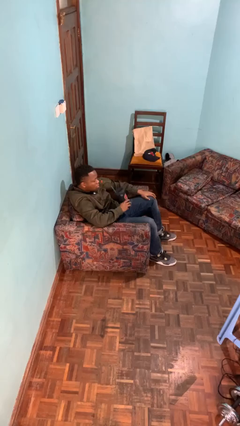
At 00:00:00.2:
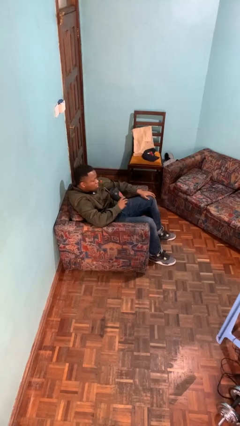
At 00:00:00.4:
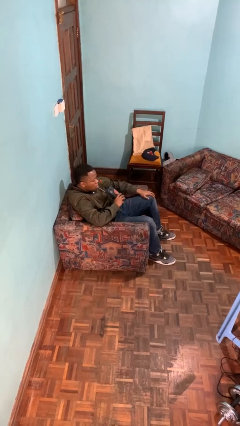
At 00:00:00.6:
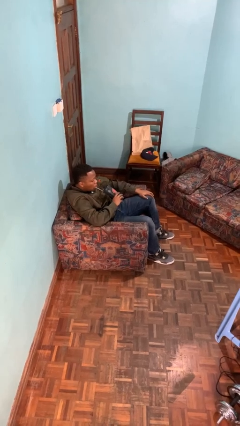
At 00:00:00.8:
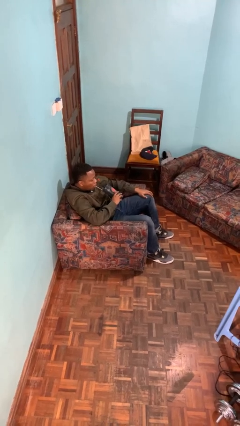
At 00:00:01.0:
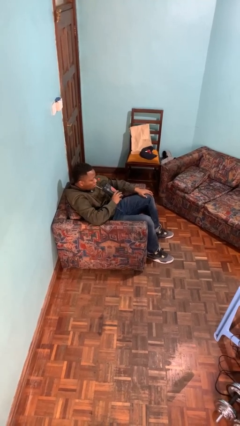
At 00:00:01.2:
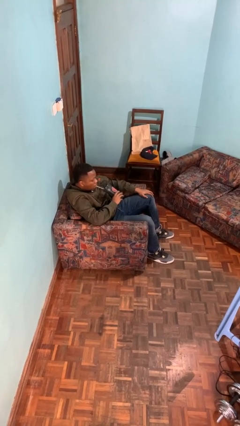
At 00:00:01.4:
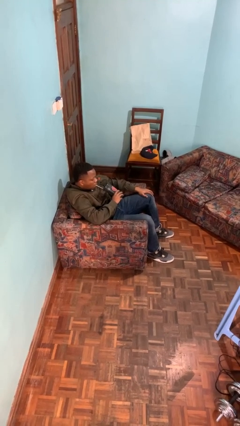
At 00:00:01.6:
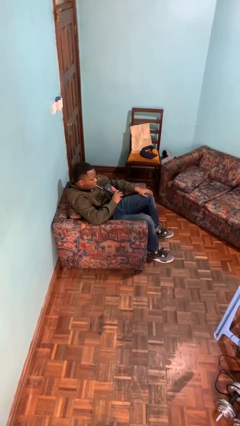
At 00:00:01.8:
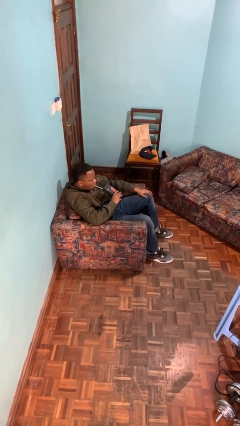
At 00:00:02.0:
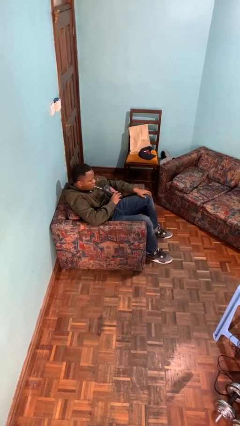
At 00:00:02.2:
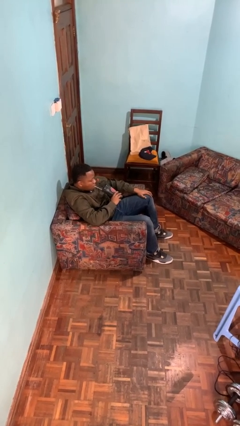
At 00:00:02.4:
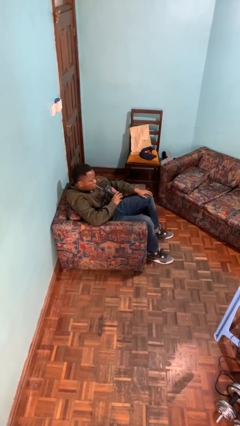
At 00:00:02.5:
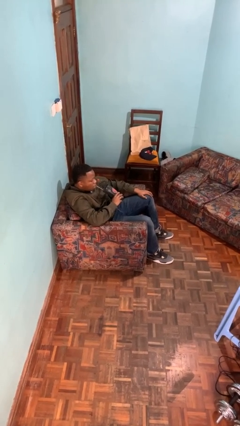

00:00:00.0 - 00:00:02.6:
person drinks from straw

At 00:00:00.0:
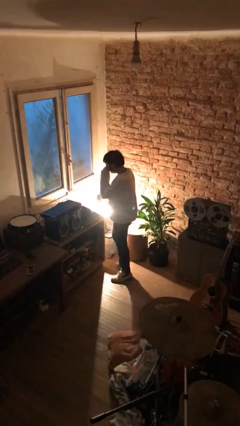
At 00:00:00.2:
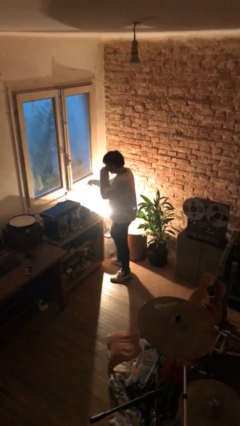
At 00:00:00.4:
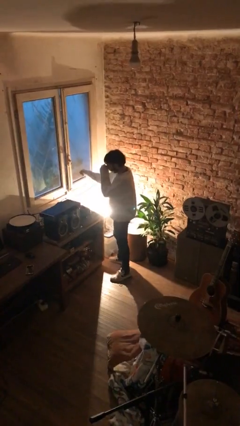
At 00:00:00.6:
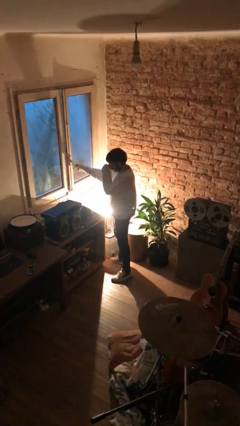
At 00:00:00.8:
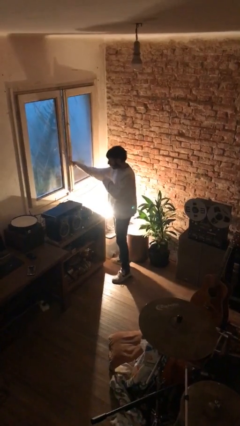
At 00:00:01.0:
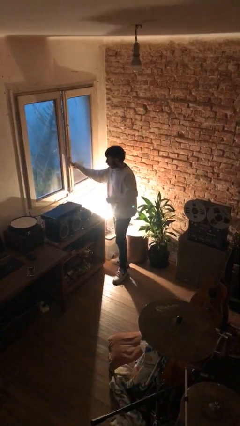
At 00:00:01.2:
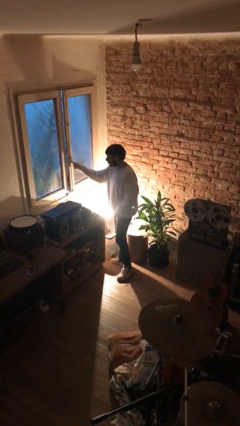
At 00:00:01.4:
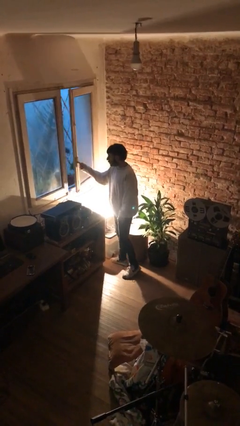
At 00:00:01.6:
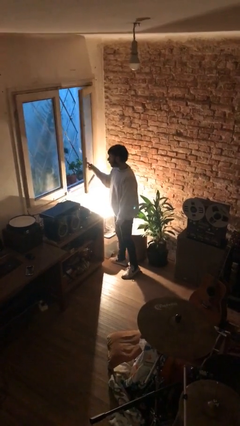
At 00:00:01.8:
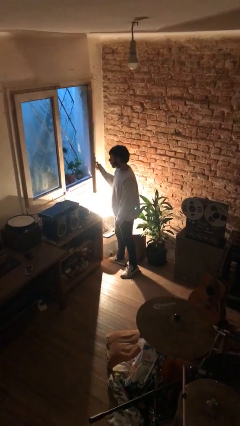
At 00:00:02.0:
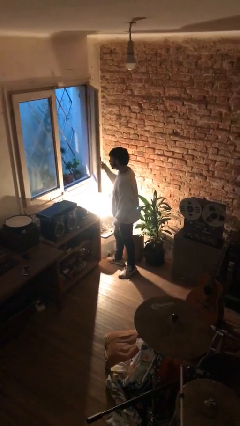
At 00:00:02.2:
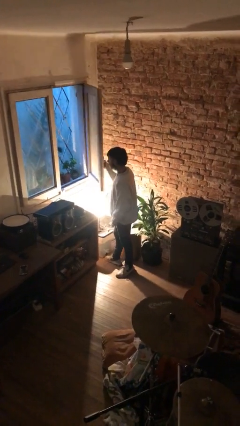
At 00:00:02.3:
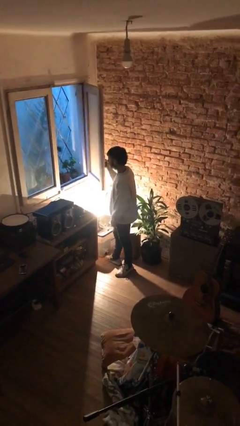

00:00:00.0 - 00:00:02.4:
person opens home window

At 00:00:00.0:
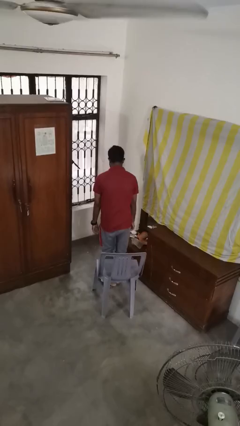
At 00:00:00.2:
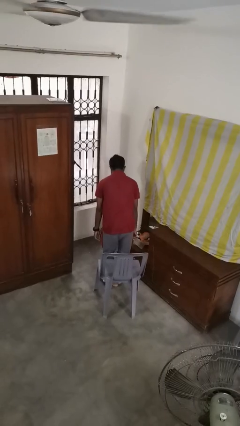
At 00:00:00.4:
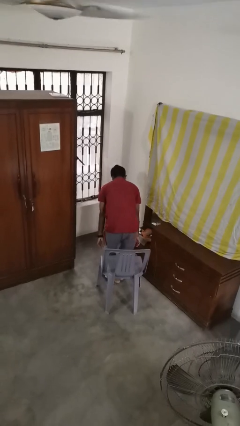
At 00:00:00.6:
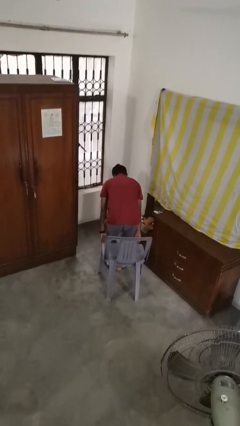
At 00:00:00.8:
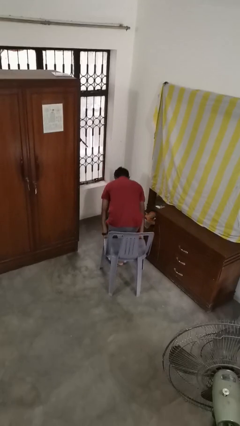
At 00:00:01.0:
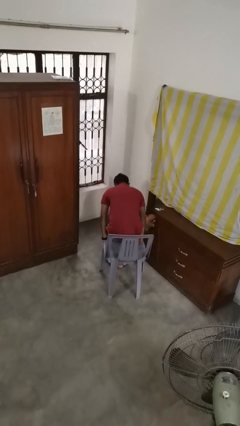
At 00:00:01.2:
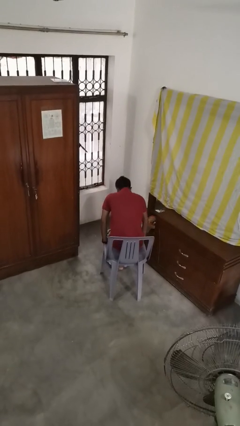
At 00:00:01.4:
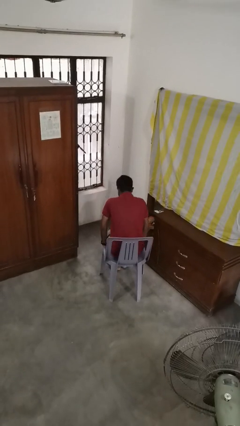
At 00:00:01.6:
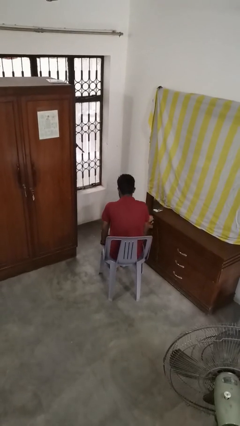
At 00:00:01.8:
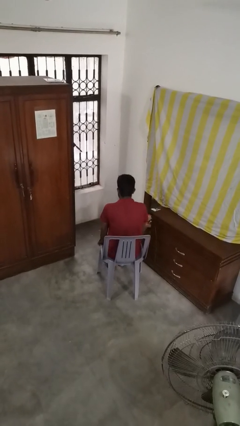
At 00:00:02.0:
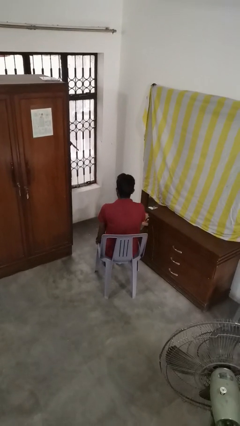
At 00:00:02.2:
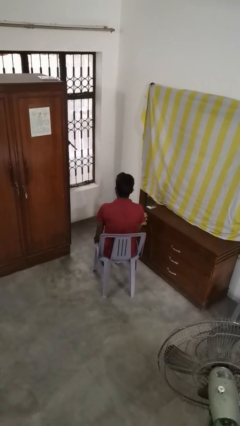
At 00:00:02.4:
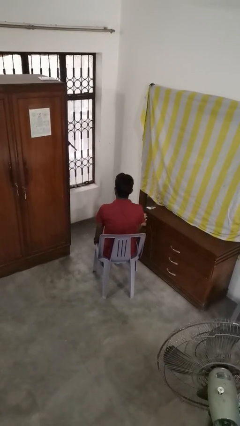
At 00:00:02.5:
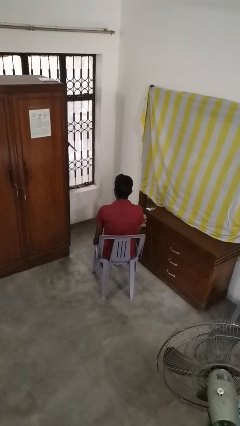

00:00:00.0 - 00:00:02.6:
person sits down

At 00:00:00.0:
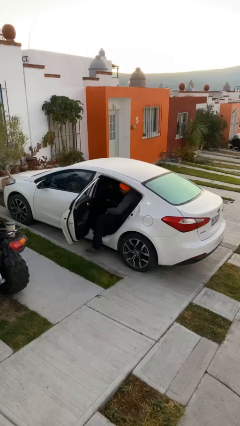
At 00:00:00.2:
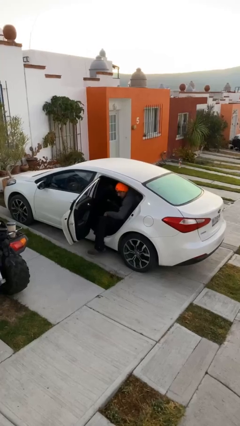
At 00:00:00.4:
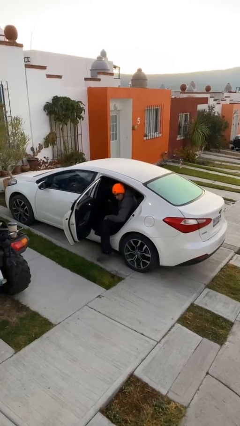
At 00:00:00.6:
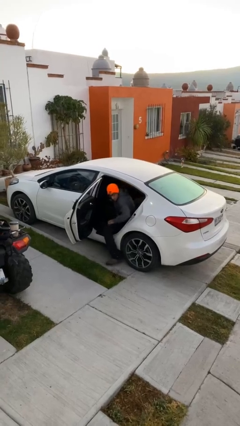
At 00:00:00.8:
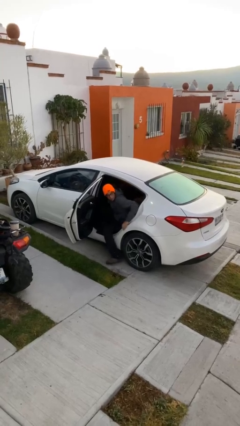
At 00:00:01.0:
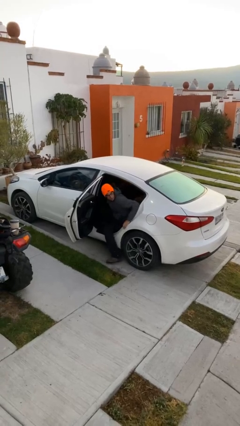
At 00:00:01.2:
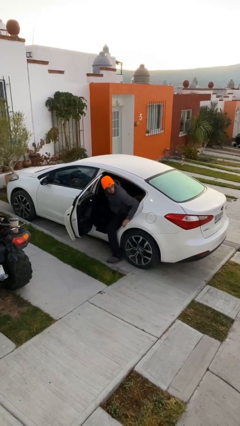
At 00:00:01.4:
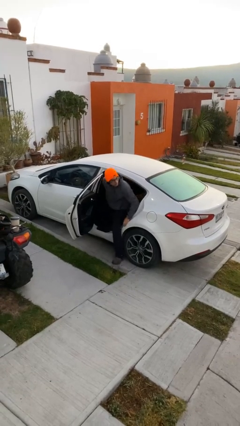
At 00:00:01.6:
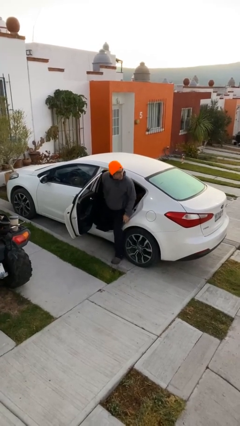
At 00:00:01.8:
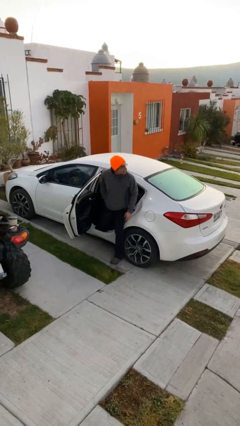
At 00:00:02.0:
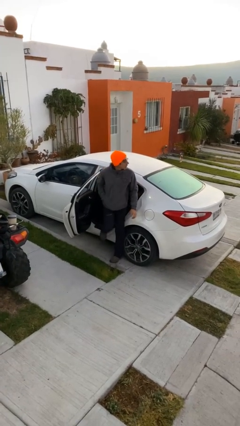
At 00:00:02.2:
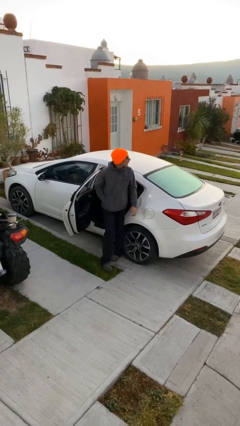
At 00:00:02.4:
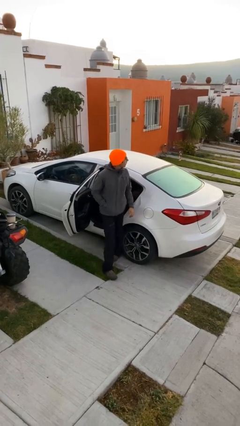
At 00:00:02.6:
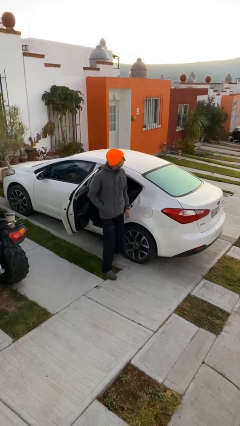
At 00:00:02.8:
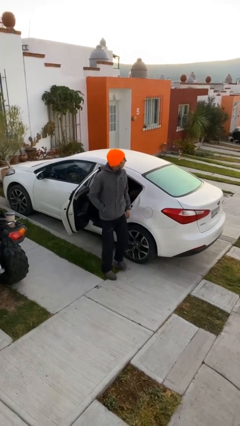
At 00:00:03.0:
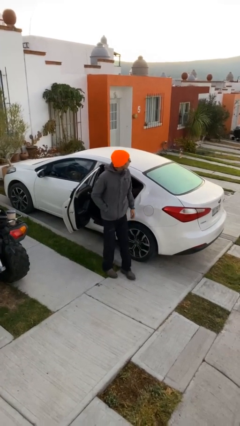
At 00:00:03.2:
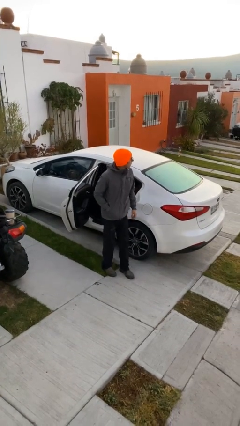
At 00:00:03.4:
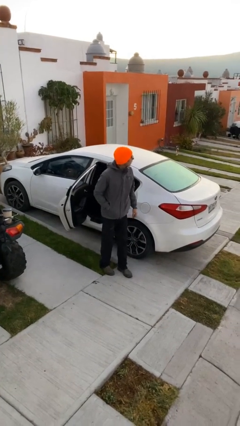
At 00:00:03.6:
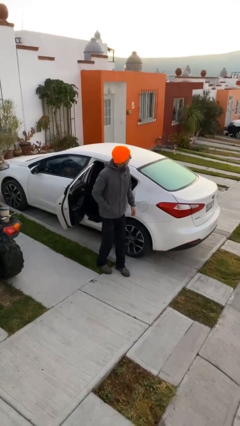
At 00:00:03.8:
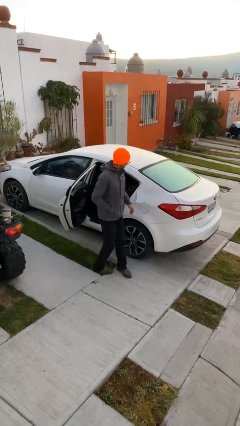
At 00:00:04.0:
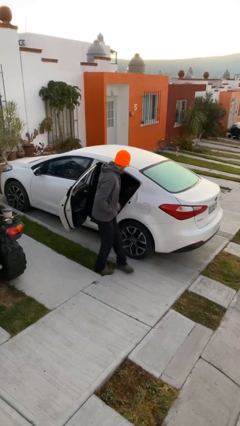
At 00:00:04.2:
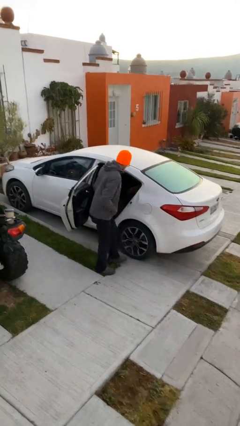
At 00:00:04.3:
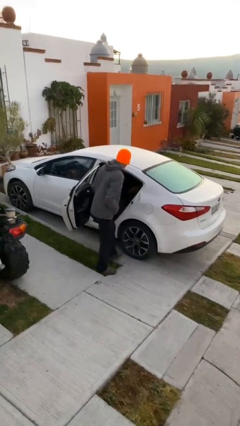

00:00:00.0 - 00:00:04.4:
person exits car

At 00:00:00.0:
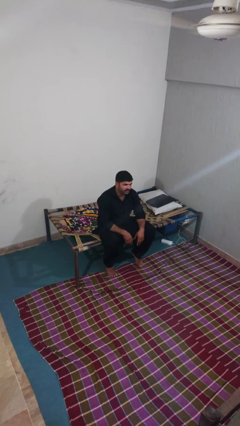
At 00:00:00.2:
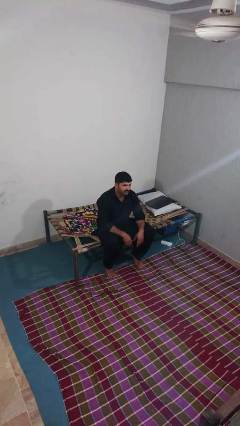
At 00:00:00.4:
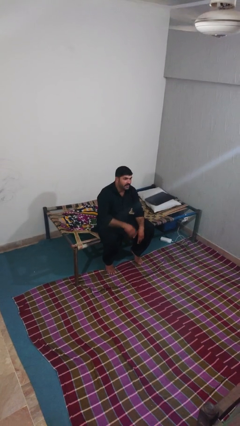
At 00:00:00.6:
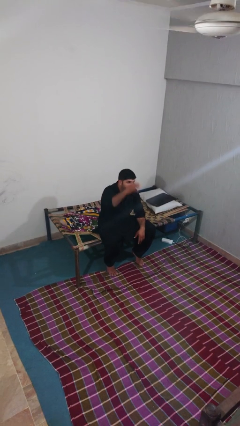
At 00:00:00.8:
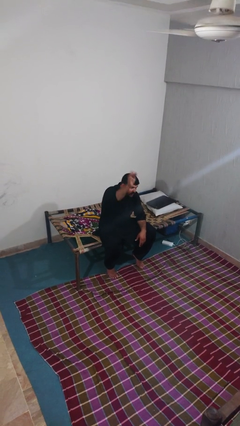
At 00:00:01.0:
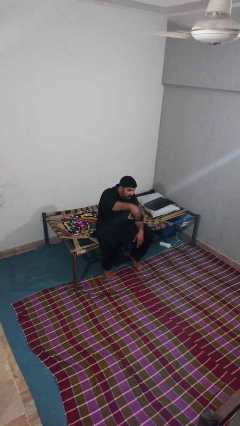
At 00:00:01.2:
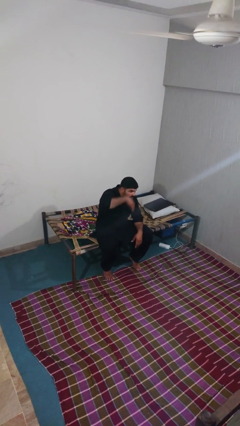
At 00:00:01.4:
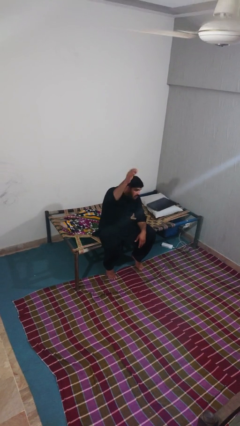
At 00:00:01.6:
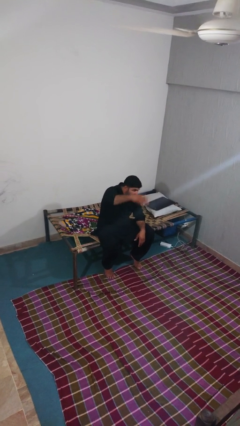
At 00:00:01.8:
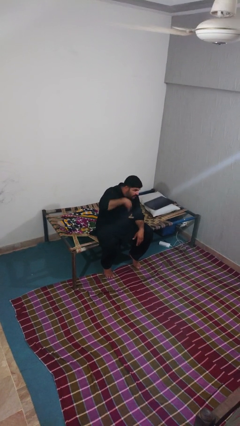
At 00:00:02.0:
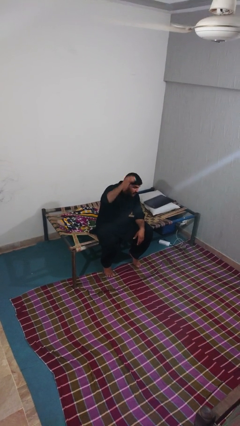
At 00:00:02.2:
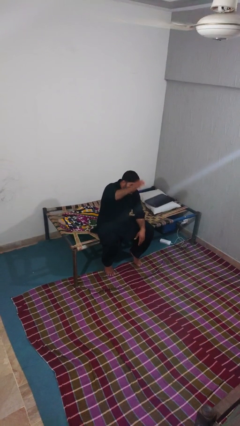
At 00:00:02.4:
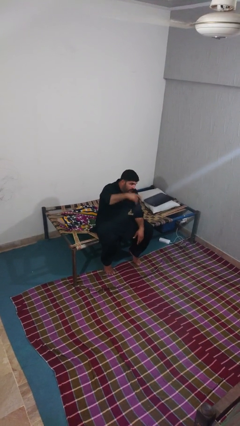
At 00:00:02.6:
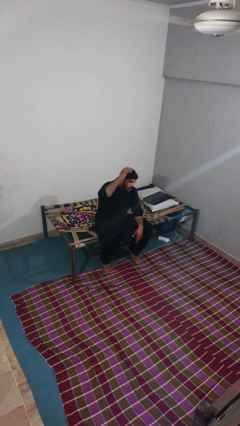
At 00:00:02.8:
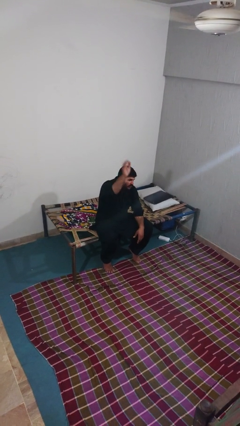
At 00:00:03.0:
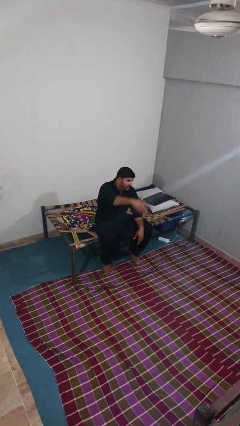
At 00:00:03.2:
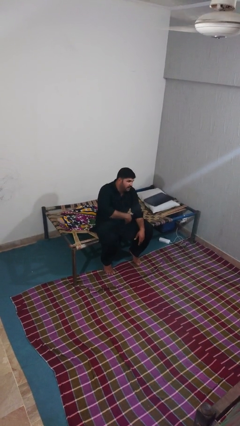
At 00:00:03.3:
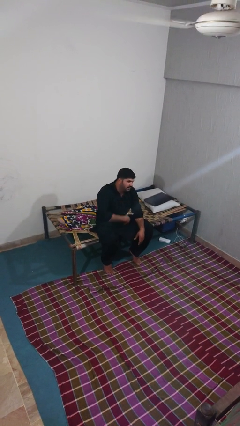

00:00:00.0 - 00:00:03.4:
person gestures come here

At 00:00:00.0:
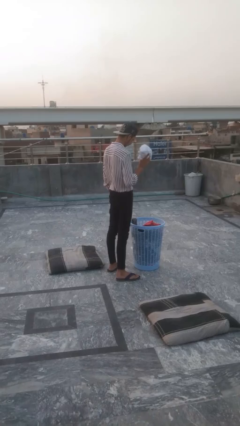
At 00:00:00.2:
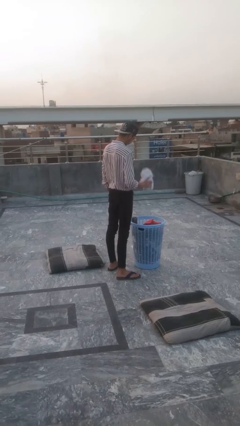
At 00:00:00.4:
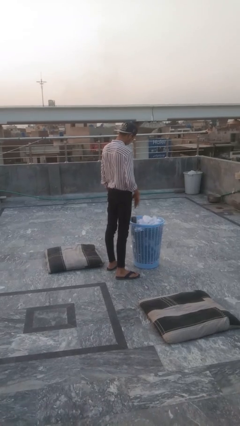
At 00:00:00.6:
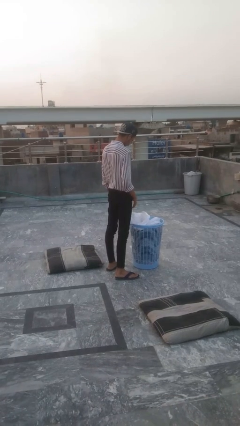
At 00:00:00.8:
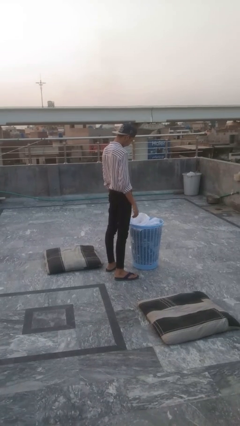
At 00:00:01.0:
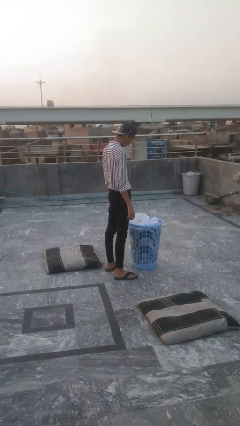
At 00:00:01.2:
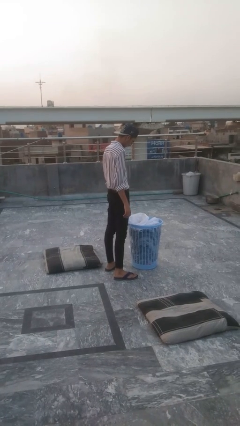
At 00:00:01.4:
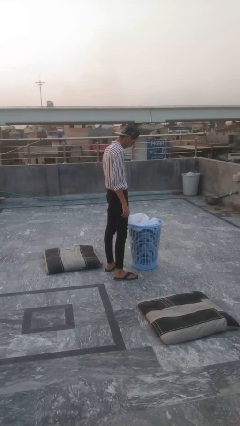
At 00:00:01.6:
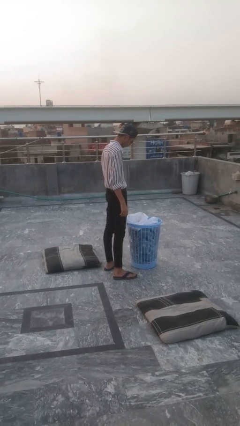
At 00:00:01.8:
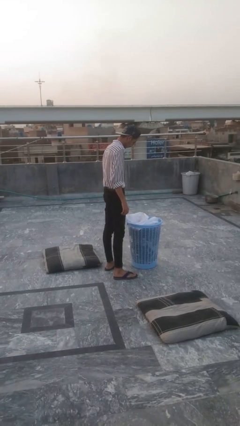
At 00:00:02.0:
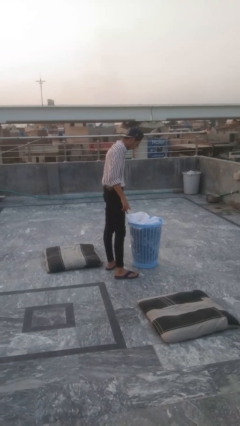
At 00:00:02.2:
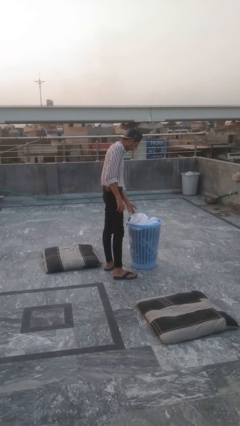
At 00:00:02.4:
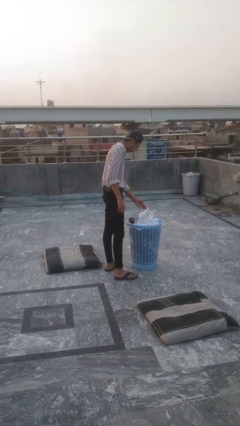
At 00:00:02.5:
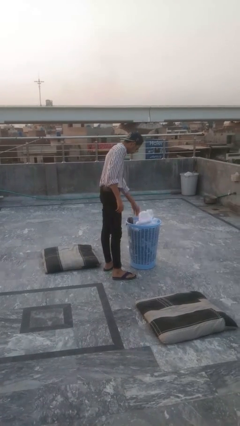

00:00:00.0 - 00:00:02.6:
person puts object into basket
